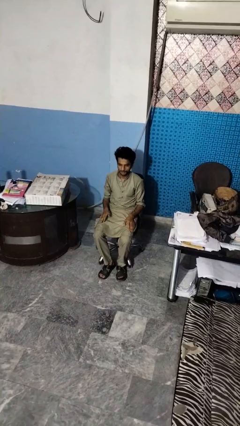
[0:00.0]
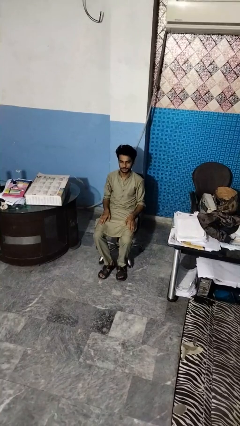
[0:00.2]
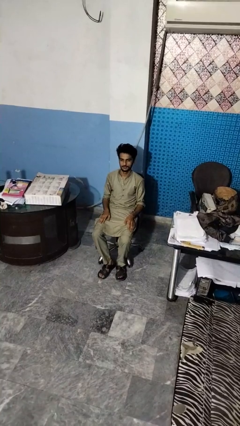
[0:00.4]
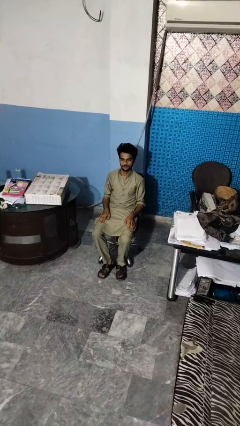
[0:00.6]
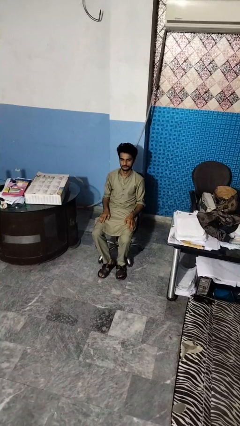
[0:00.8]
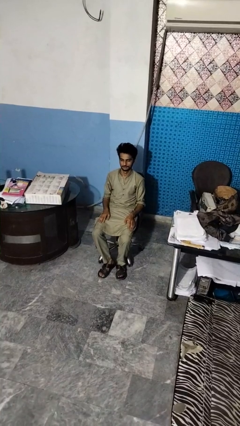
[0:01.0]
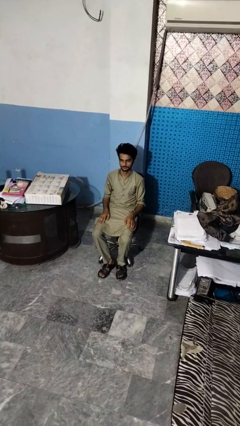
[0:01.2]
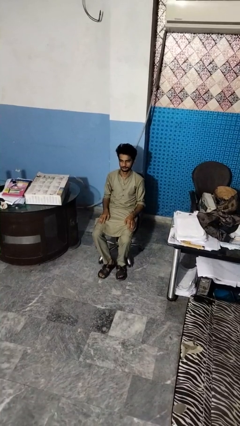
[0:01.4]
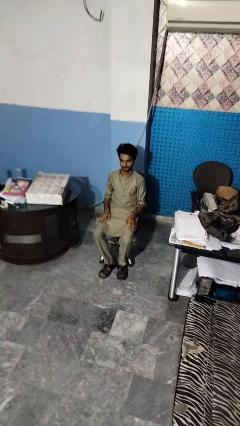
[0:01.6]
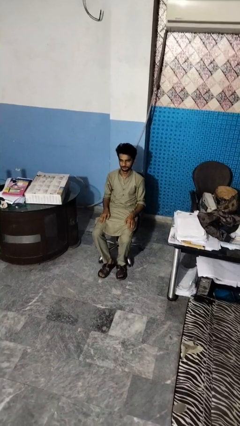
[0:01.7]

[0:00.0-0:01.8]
person swats bug

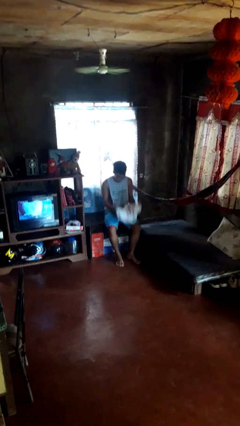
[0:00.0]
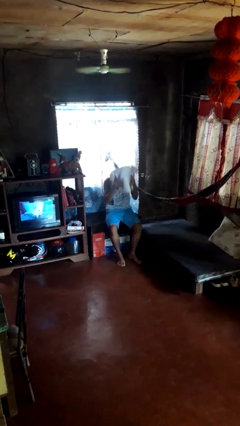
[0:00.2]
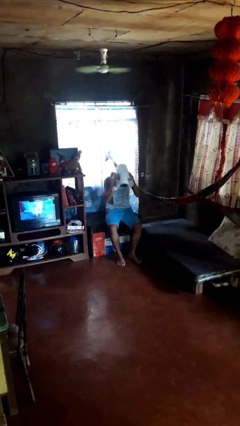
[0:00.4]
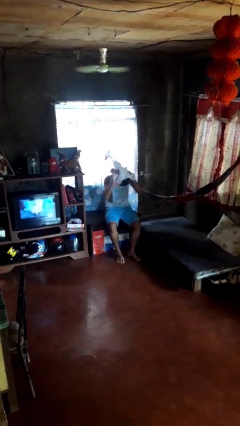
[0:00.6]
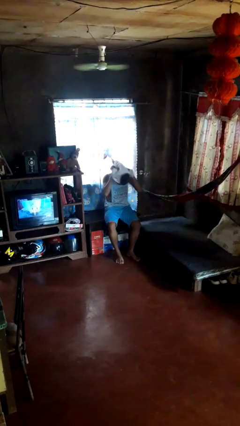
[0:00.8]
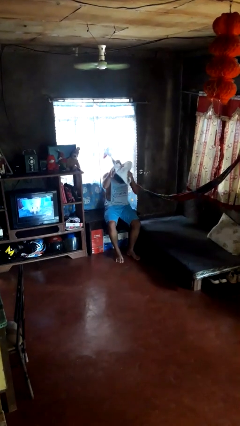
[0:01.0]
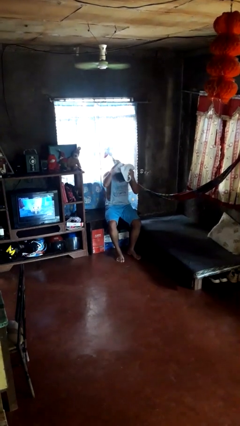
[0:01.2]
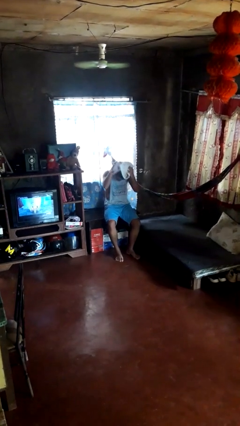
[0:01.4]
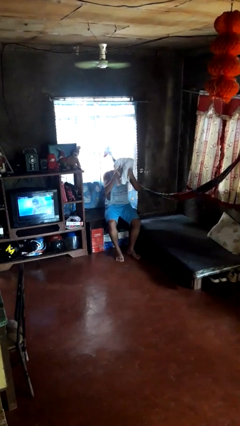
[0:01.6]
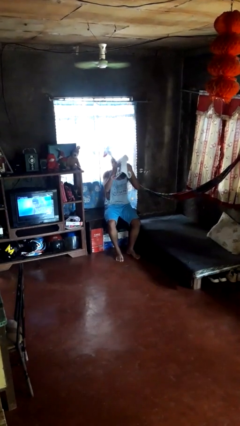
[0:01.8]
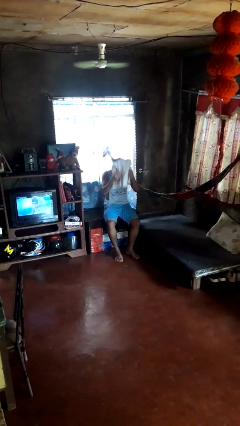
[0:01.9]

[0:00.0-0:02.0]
person dries hair with towel

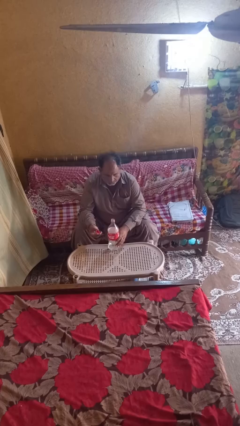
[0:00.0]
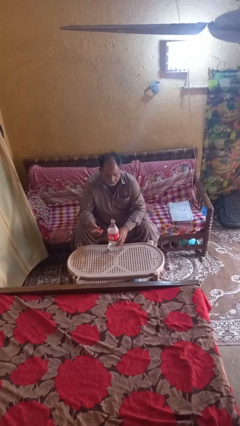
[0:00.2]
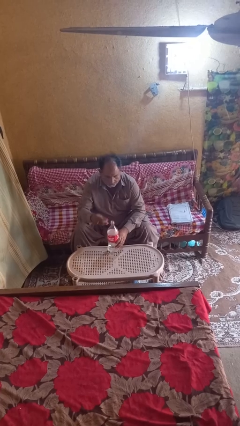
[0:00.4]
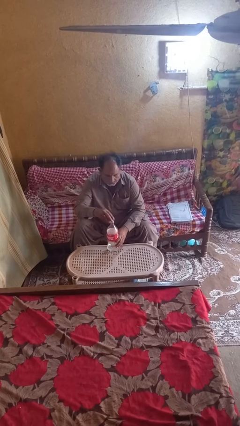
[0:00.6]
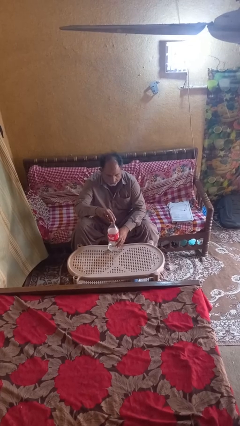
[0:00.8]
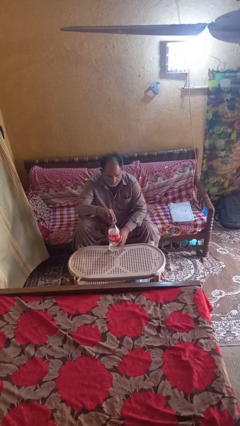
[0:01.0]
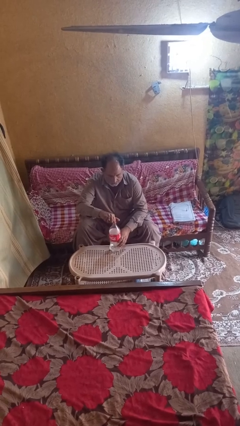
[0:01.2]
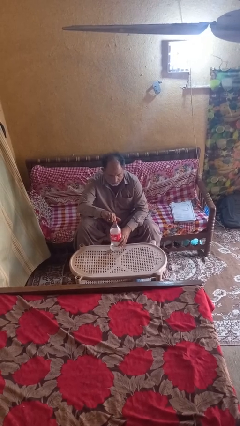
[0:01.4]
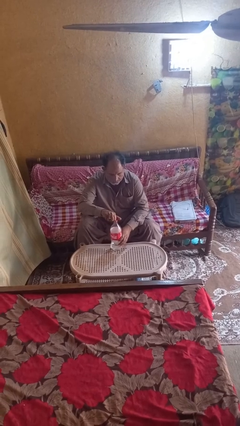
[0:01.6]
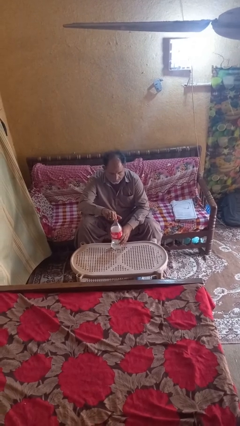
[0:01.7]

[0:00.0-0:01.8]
person screws lid to bottle

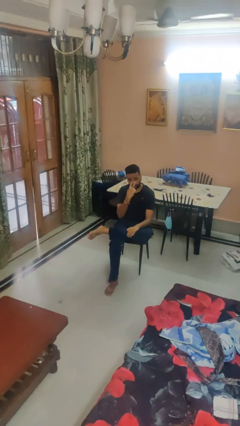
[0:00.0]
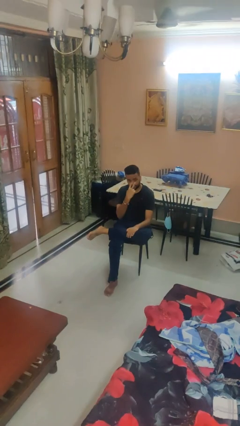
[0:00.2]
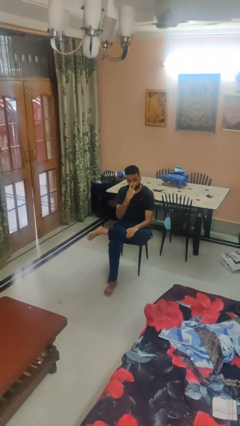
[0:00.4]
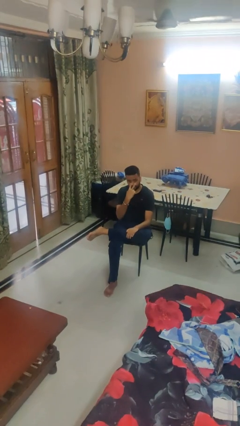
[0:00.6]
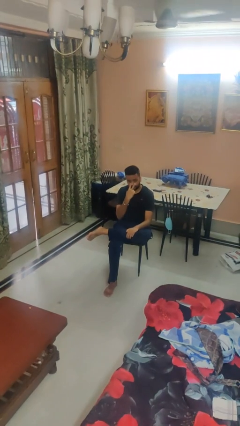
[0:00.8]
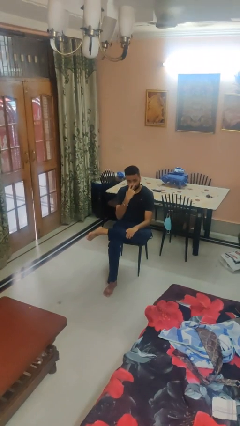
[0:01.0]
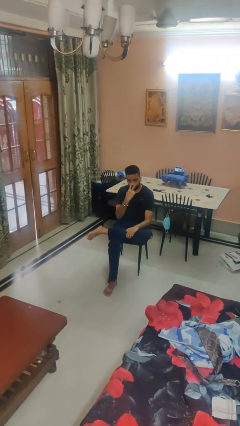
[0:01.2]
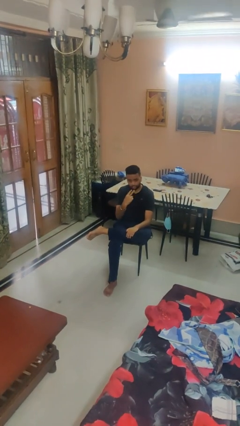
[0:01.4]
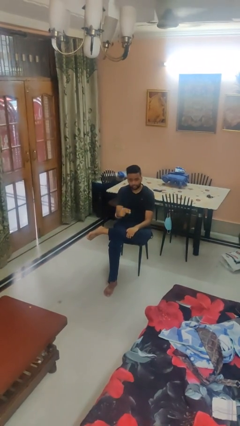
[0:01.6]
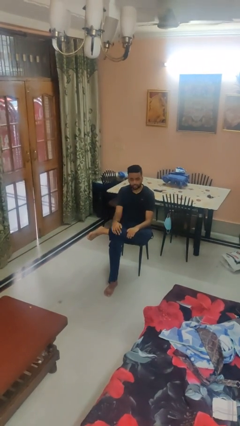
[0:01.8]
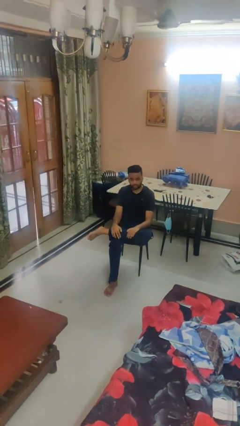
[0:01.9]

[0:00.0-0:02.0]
person gestures watch closely

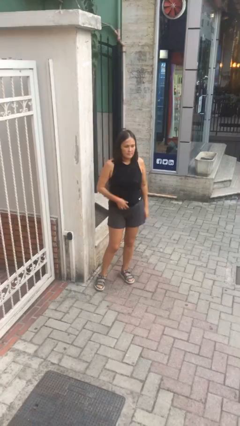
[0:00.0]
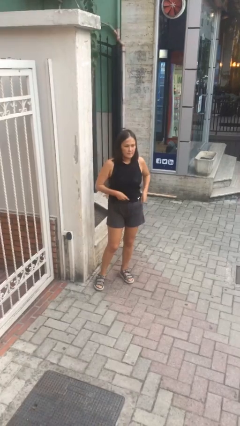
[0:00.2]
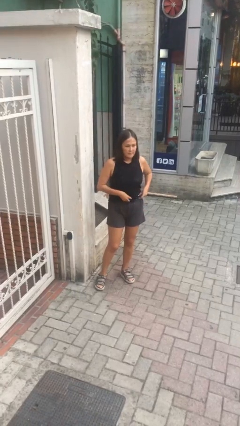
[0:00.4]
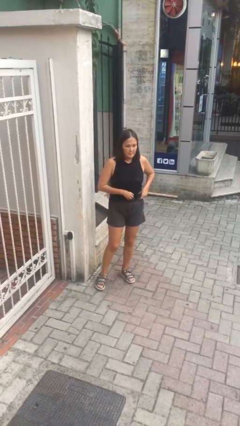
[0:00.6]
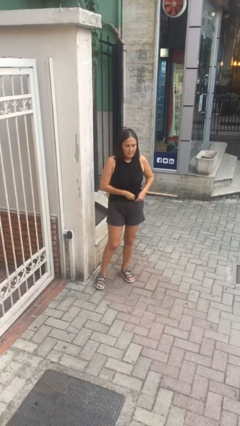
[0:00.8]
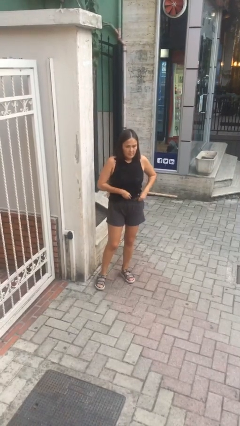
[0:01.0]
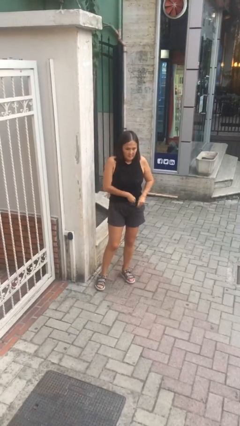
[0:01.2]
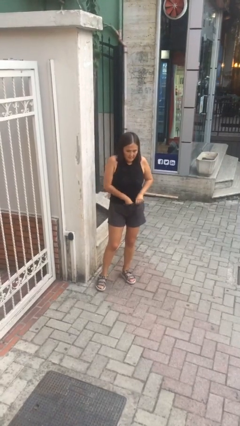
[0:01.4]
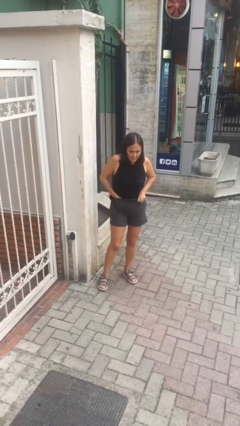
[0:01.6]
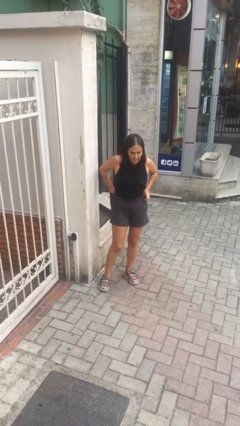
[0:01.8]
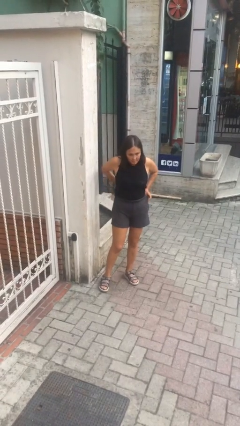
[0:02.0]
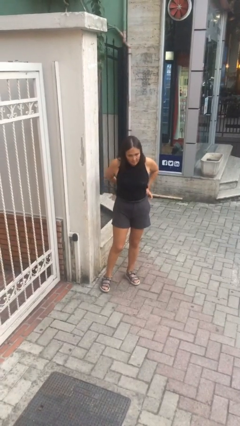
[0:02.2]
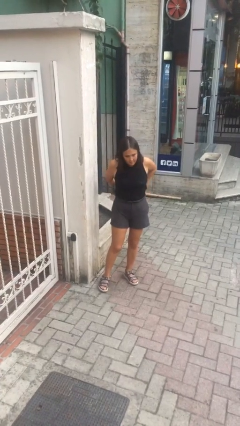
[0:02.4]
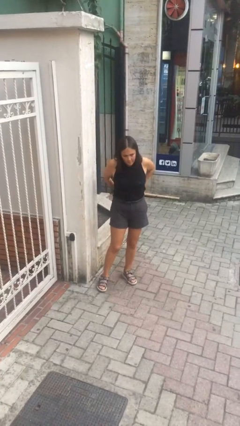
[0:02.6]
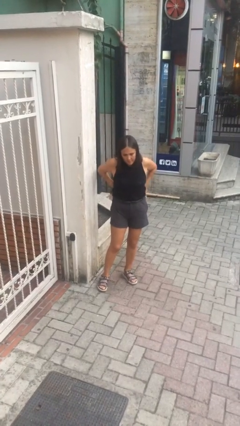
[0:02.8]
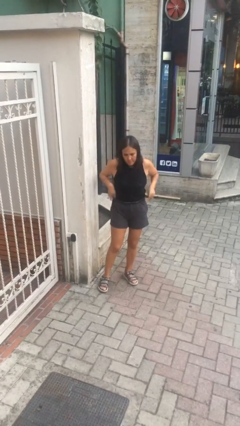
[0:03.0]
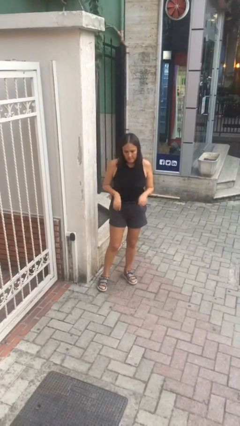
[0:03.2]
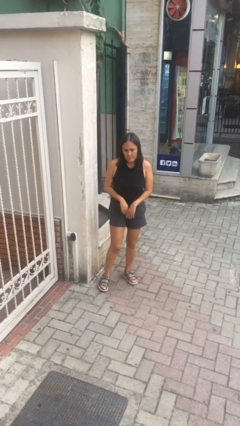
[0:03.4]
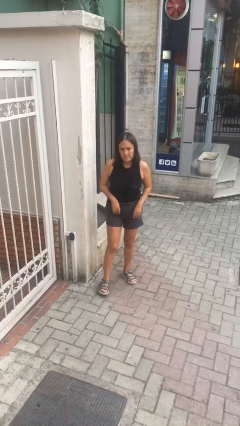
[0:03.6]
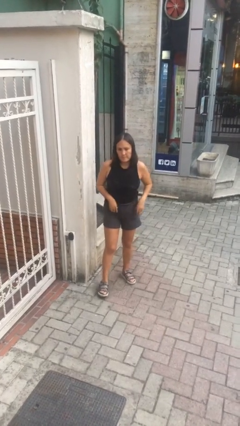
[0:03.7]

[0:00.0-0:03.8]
person tucks in shirt

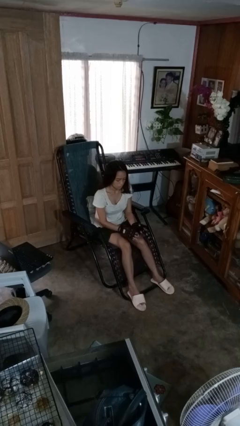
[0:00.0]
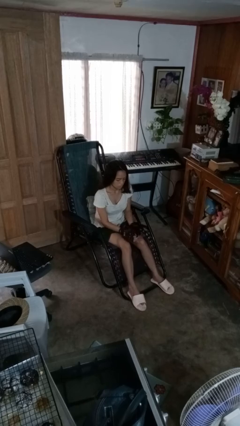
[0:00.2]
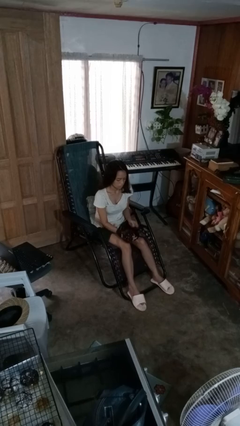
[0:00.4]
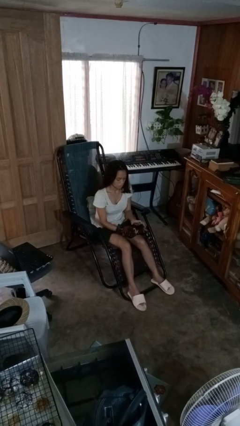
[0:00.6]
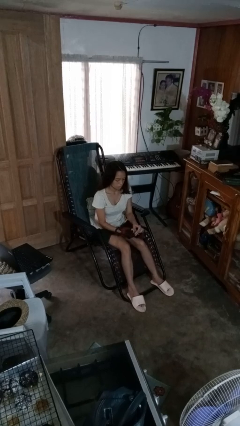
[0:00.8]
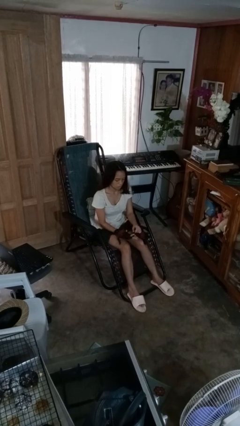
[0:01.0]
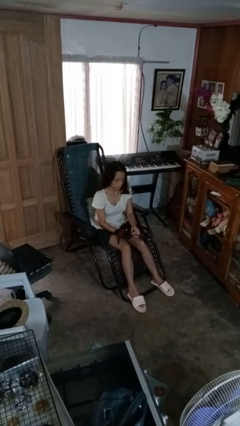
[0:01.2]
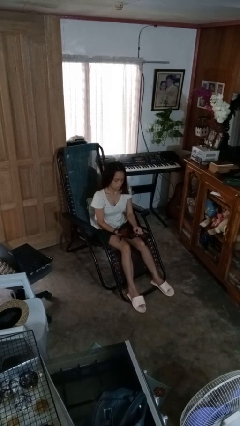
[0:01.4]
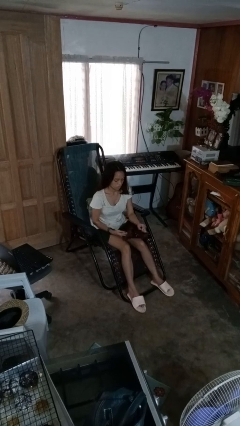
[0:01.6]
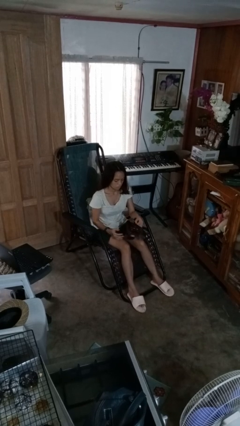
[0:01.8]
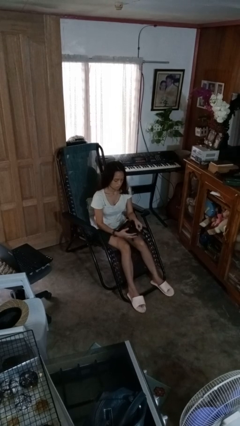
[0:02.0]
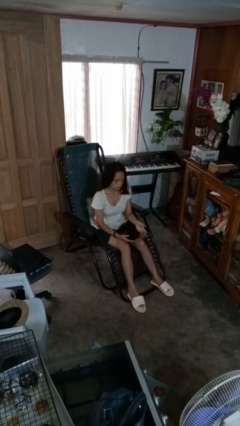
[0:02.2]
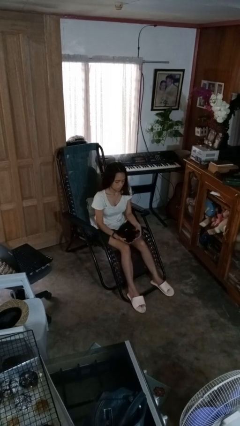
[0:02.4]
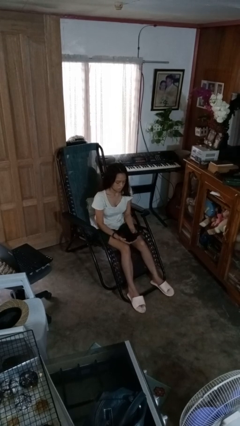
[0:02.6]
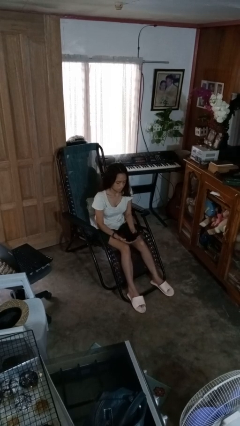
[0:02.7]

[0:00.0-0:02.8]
person takes off gloves

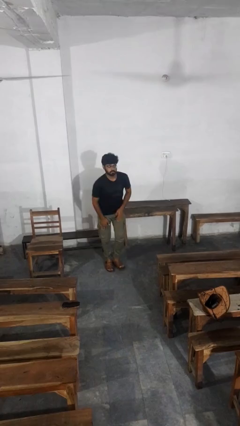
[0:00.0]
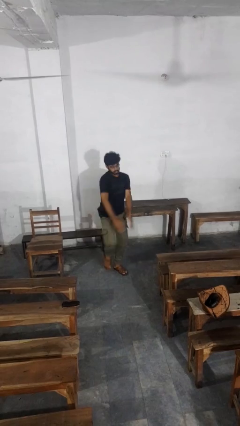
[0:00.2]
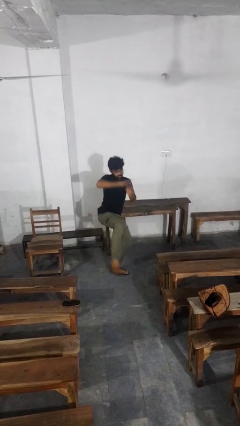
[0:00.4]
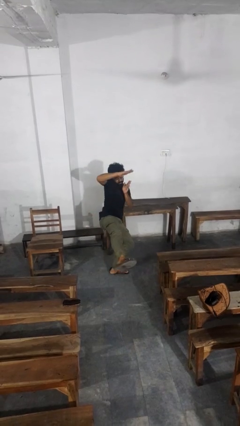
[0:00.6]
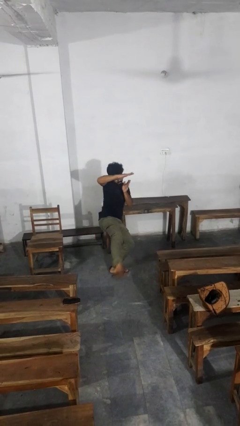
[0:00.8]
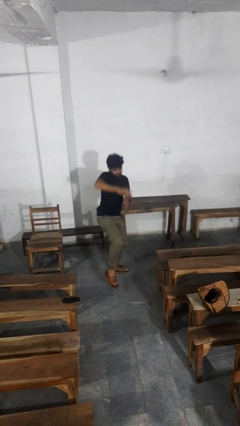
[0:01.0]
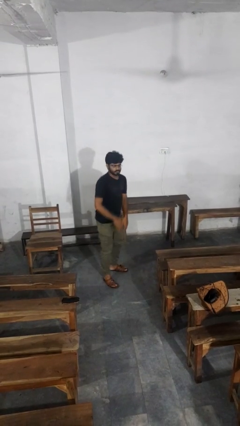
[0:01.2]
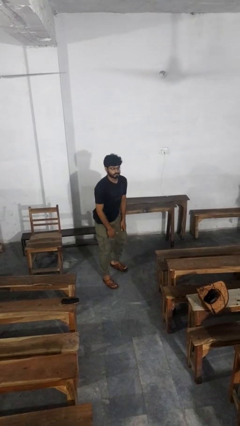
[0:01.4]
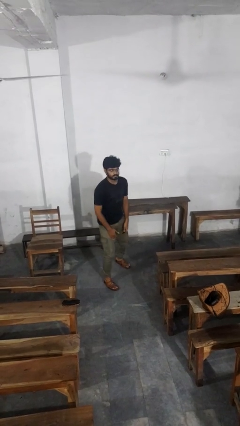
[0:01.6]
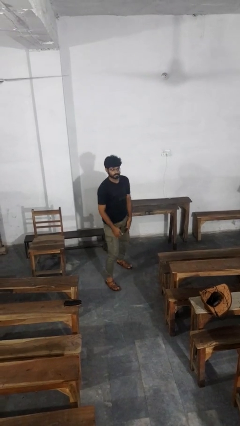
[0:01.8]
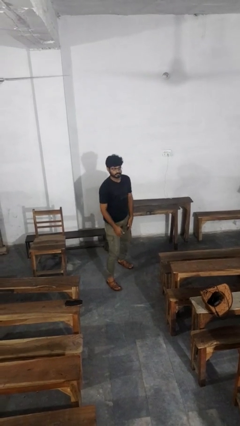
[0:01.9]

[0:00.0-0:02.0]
person karate kicks

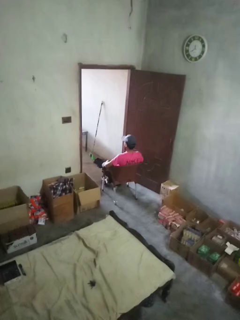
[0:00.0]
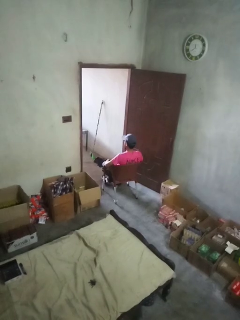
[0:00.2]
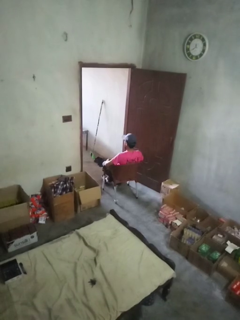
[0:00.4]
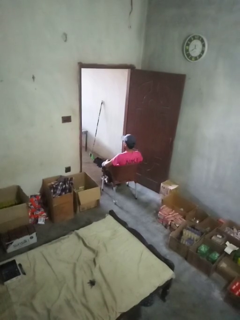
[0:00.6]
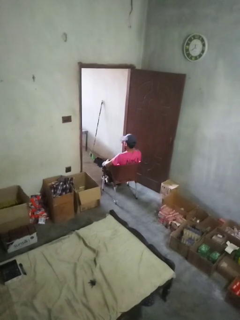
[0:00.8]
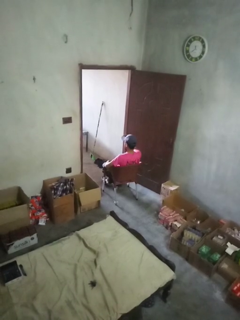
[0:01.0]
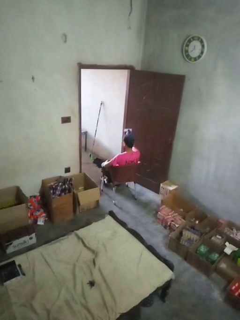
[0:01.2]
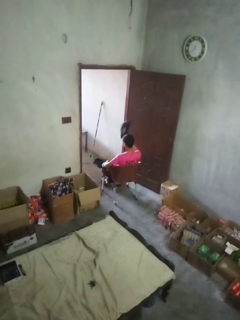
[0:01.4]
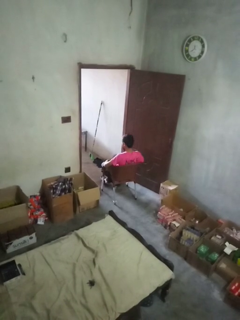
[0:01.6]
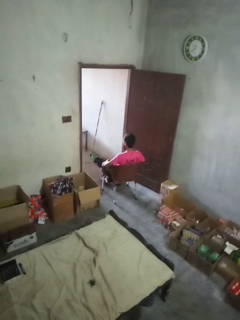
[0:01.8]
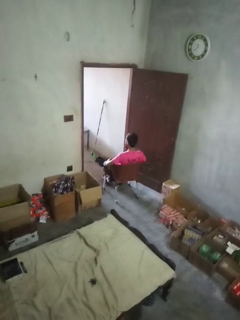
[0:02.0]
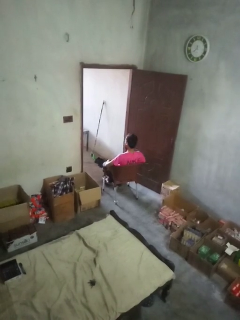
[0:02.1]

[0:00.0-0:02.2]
person takes off hat
